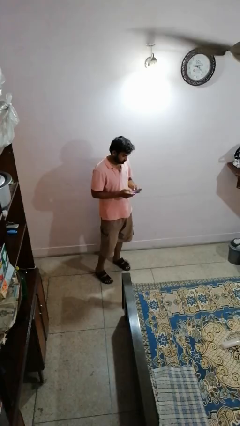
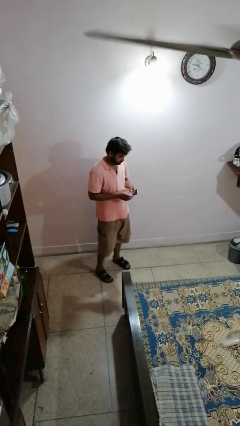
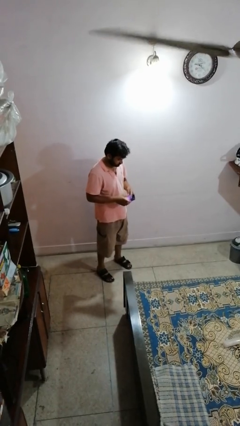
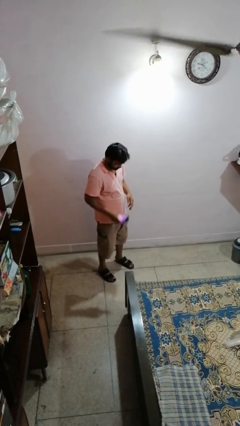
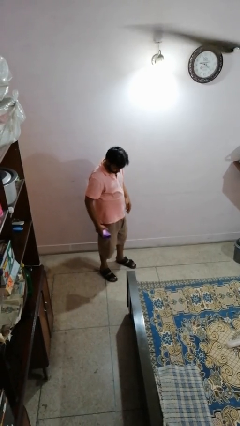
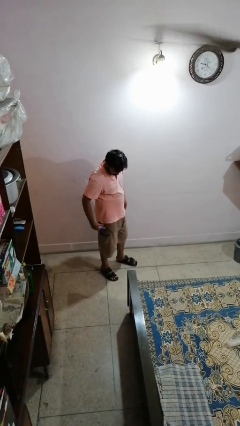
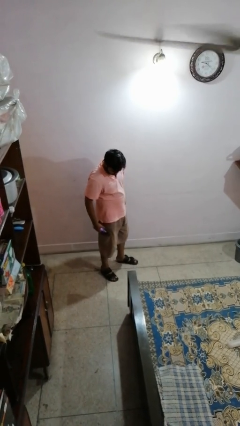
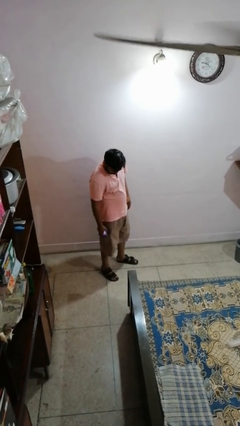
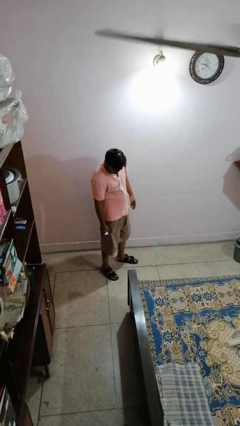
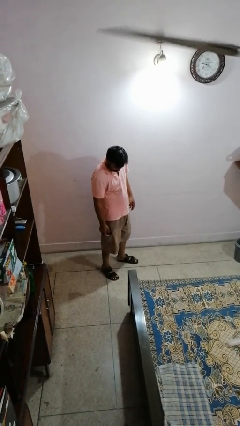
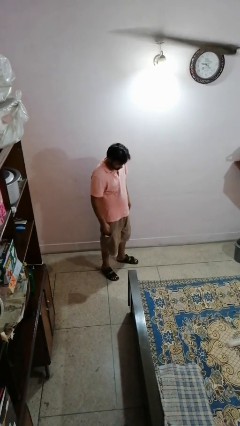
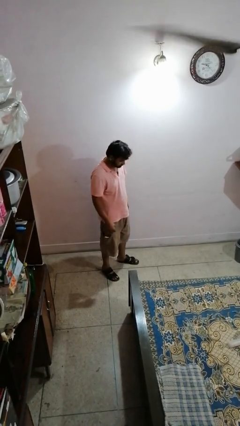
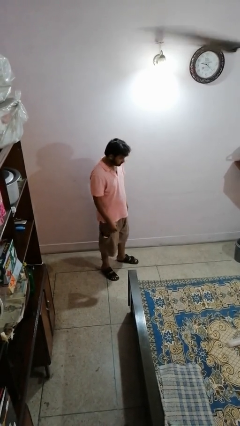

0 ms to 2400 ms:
person puts phone into pocket

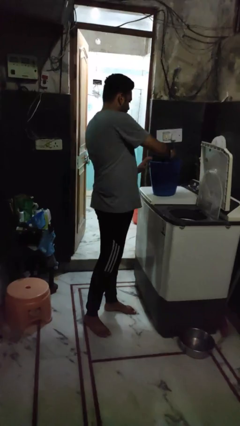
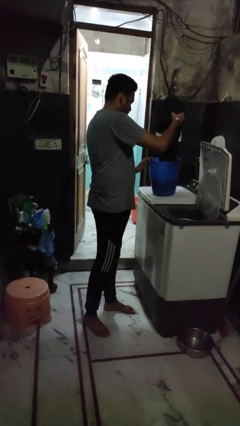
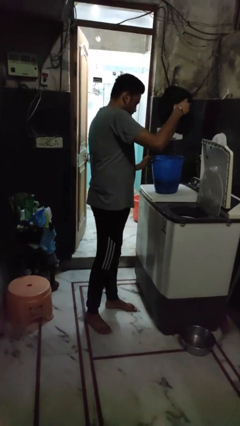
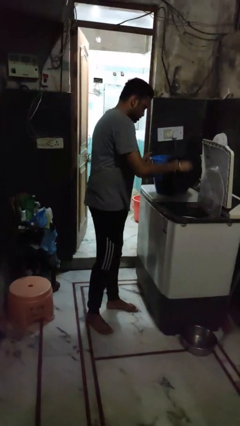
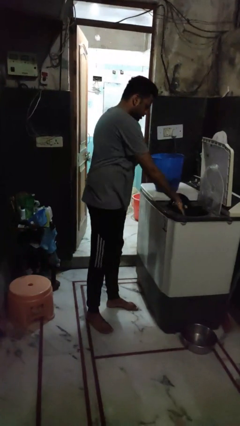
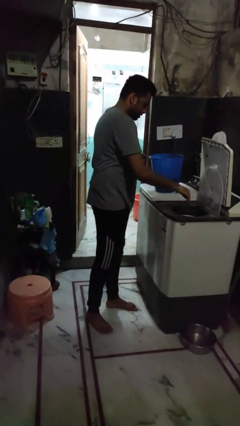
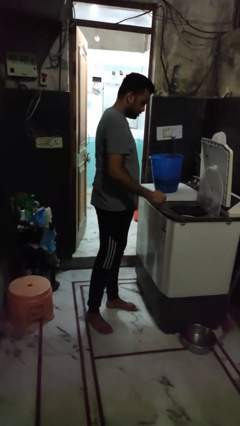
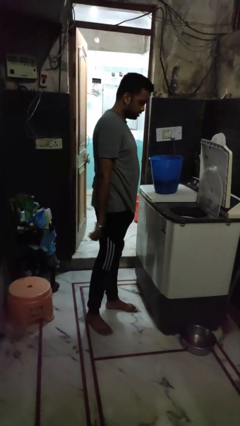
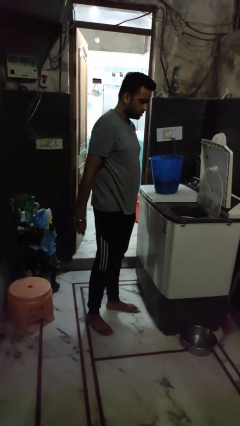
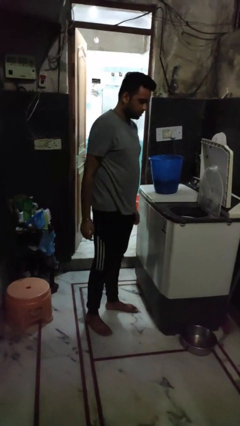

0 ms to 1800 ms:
person loads dryer

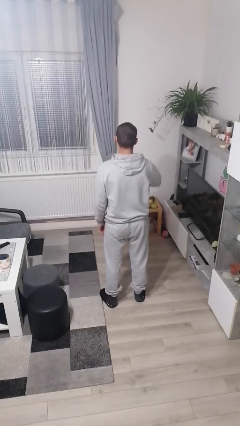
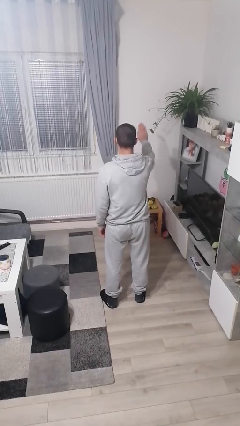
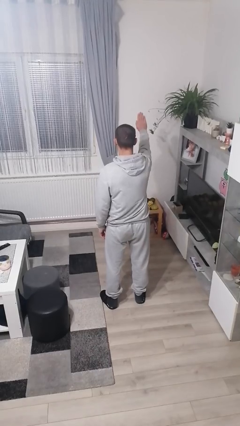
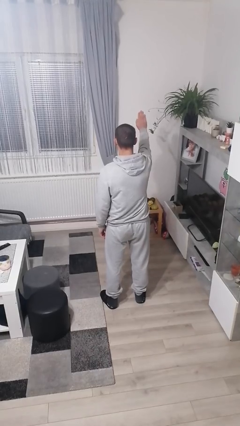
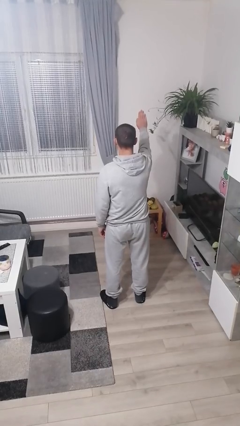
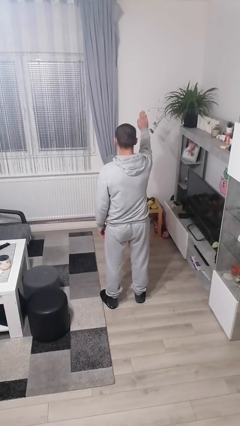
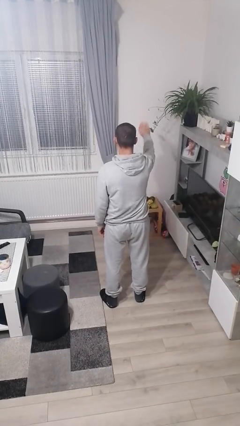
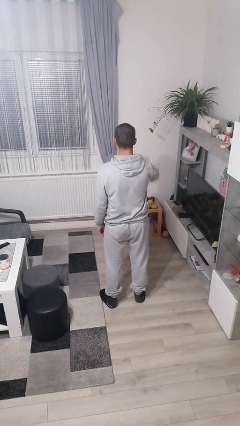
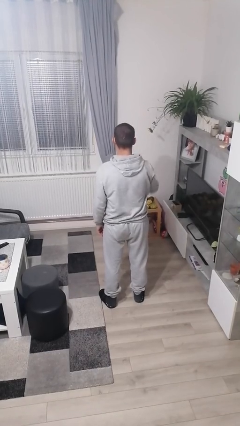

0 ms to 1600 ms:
person gestures stop

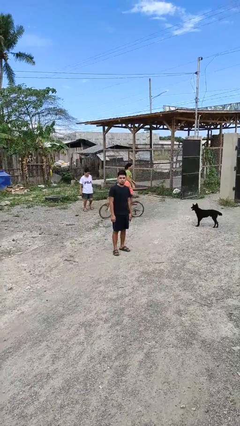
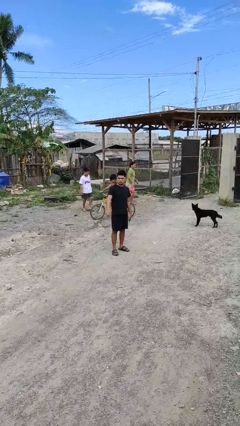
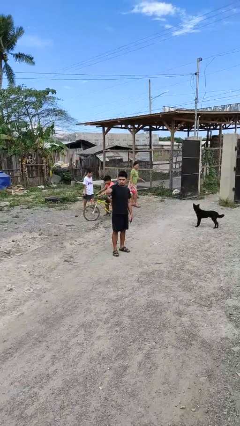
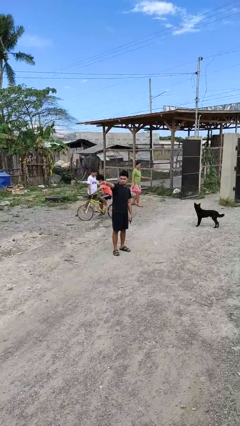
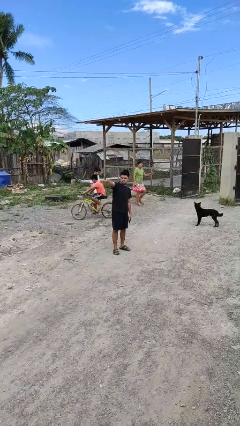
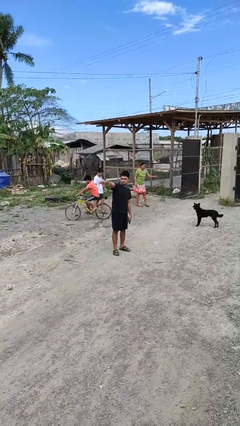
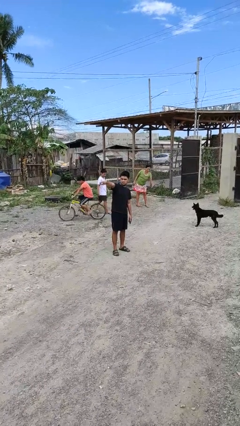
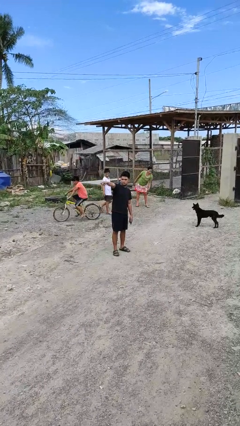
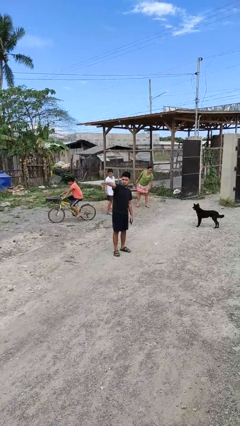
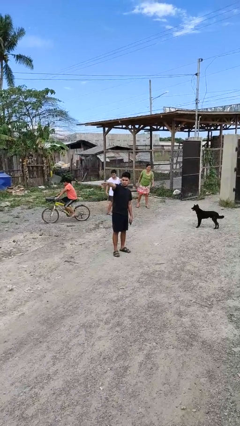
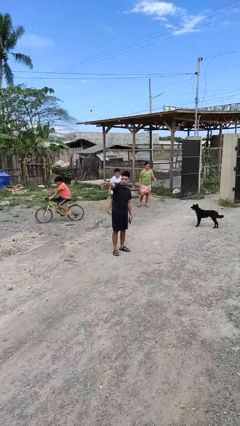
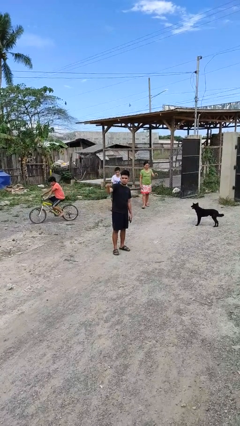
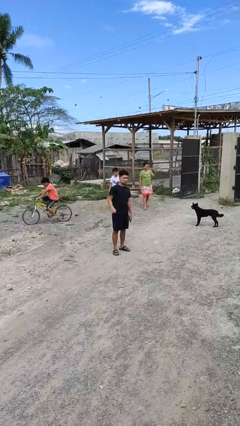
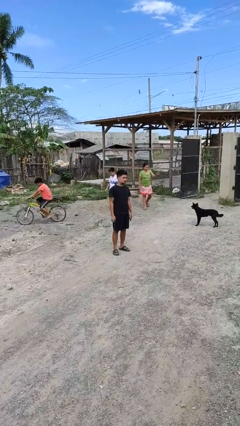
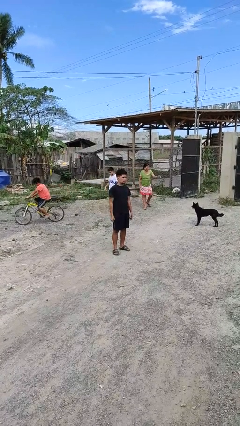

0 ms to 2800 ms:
person points at person

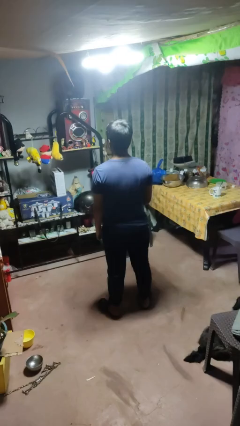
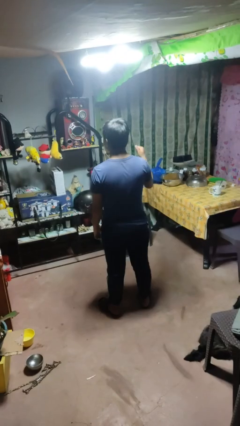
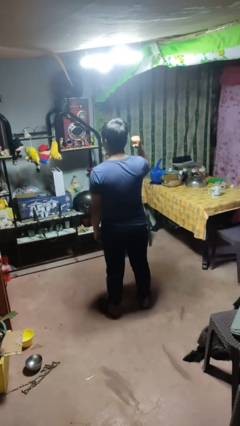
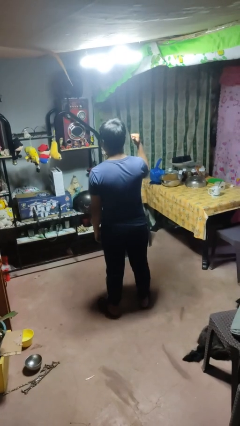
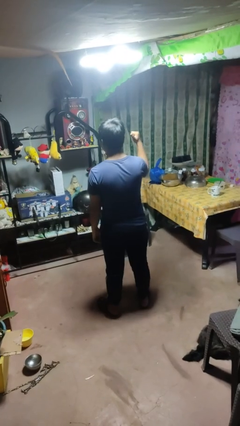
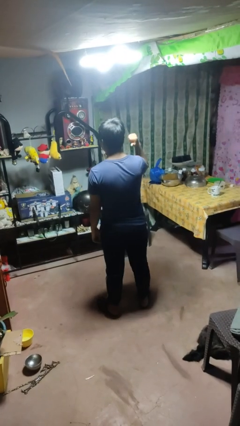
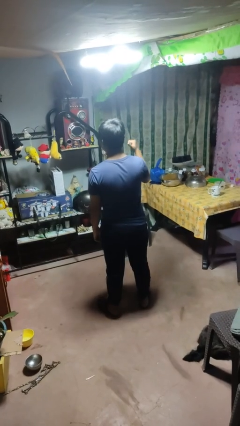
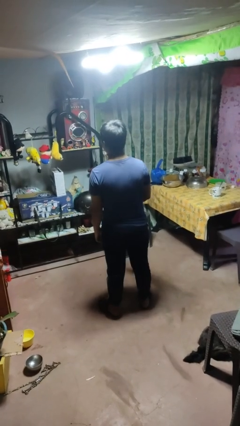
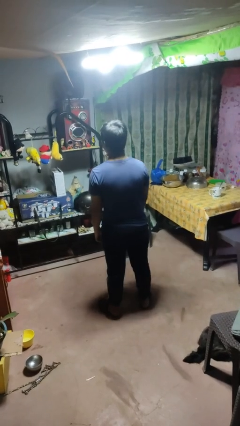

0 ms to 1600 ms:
person gestures behind me

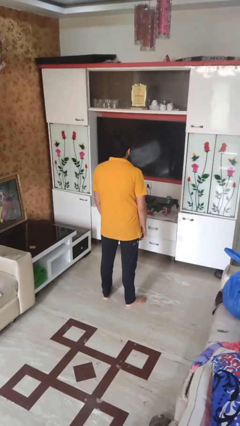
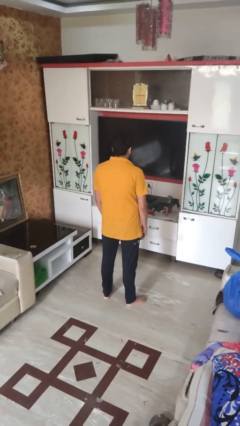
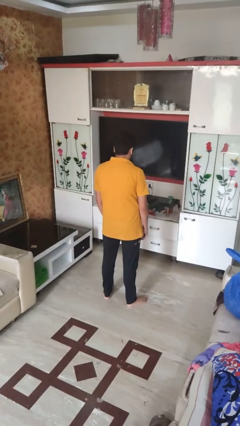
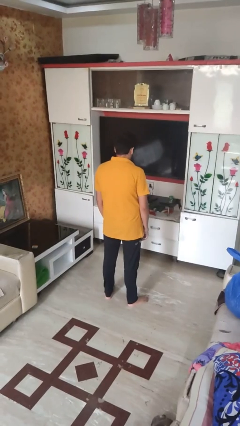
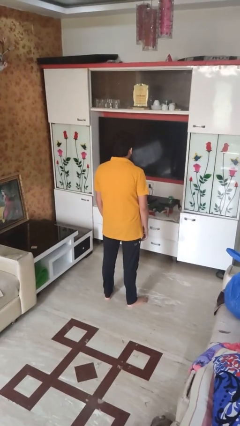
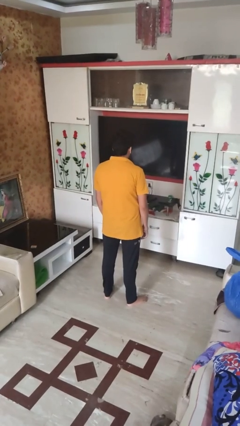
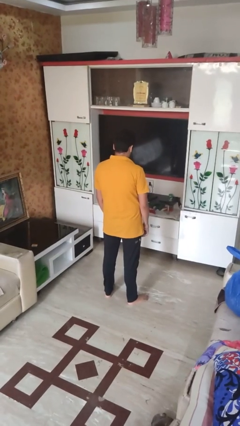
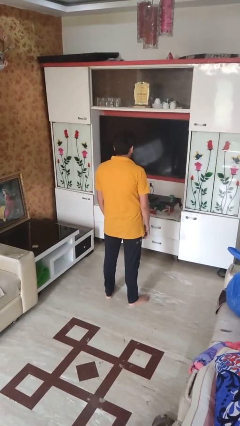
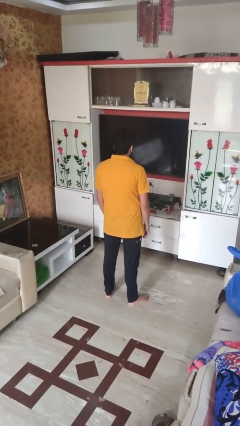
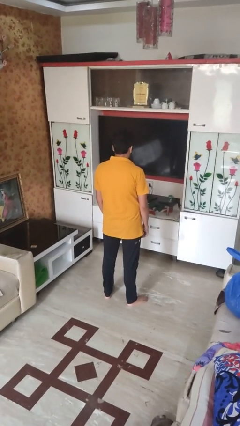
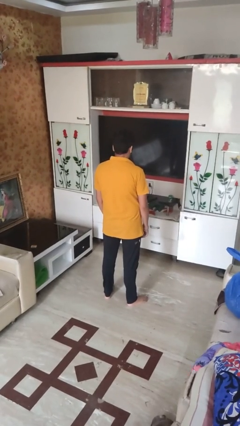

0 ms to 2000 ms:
person nods head

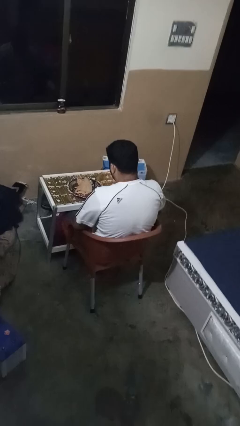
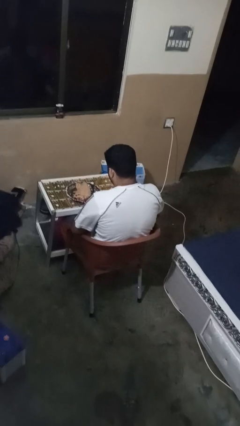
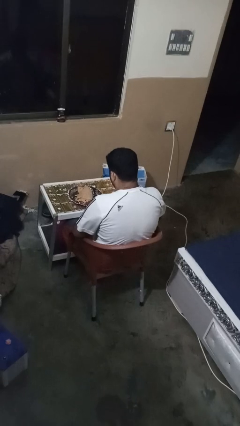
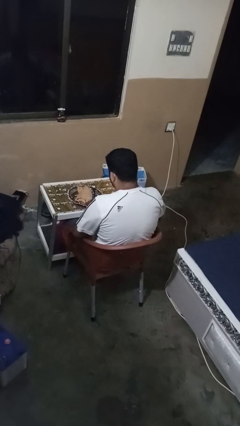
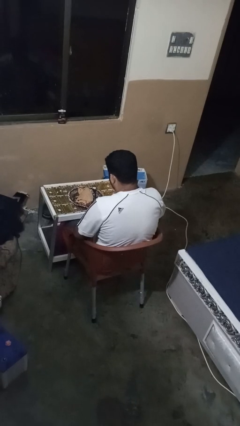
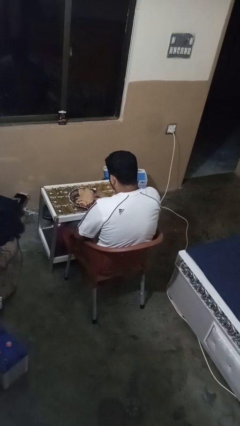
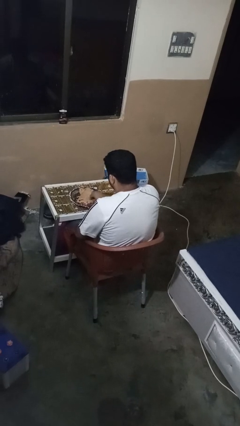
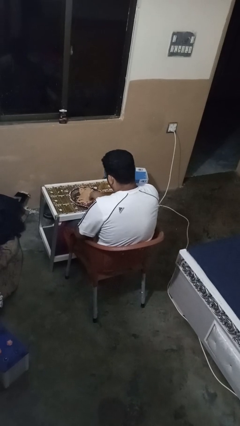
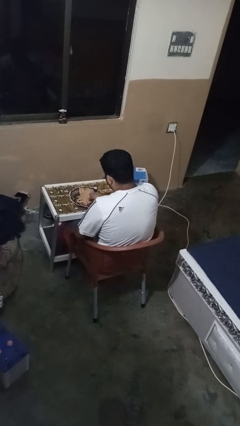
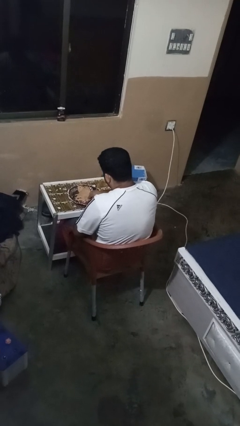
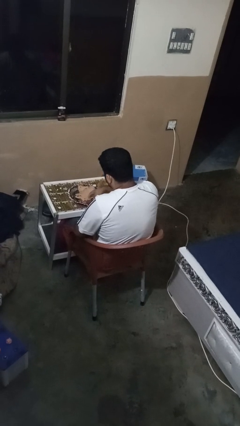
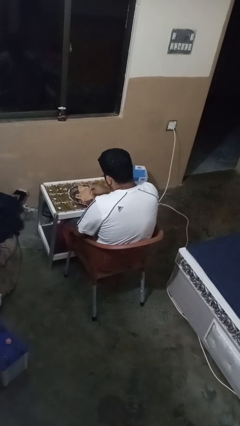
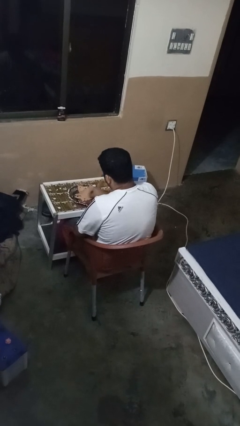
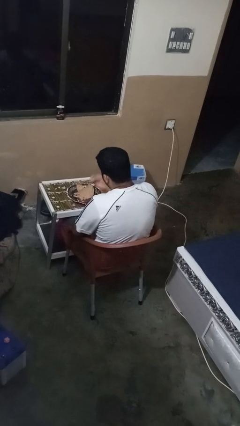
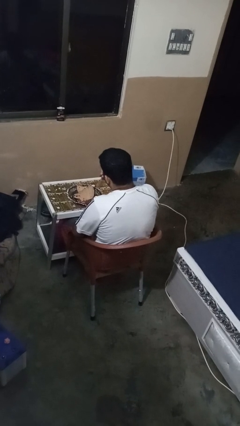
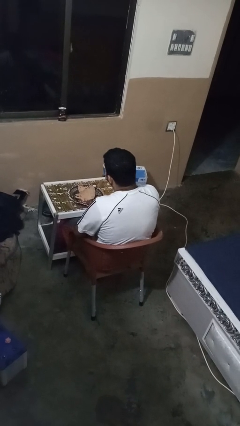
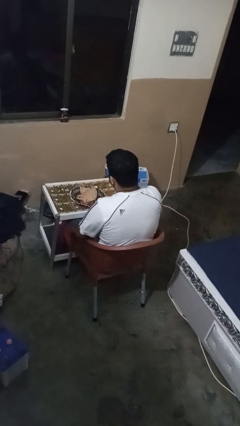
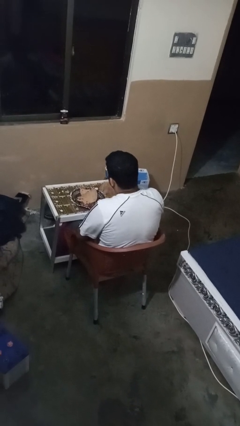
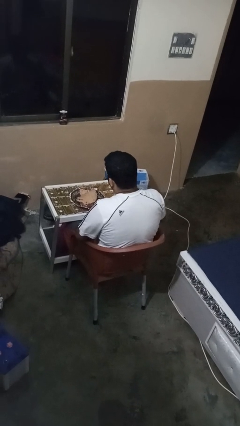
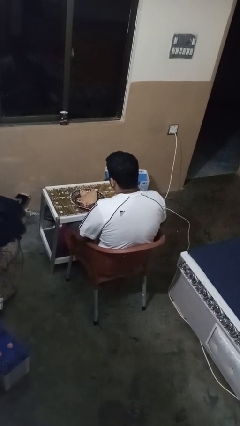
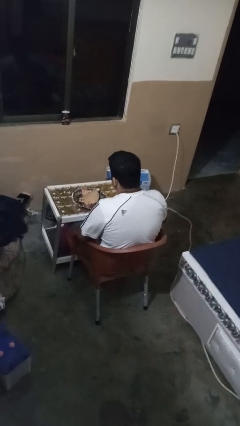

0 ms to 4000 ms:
person eats with hands

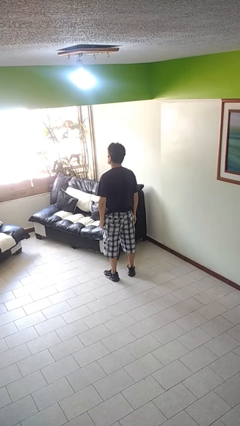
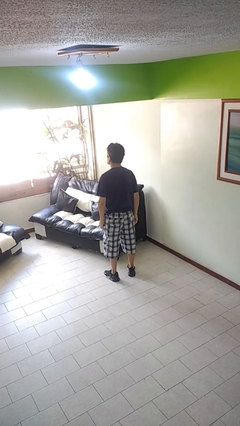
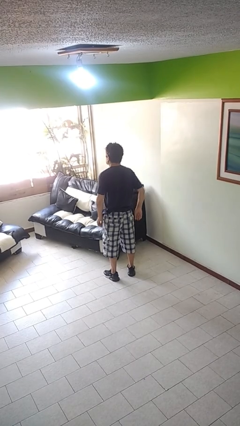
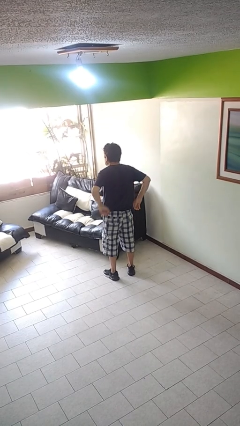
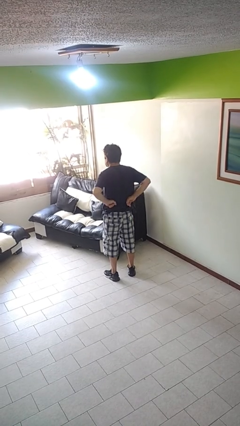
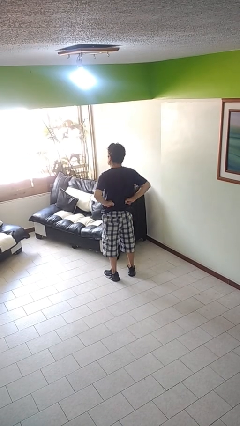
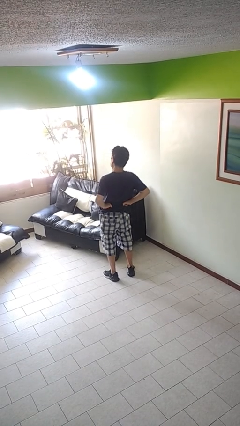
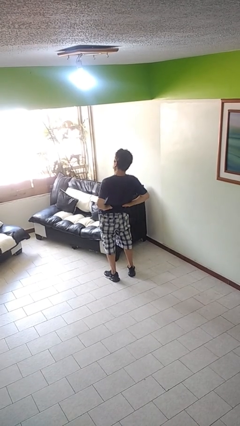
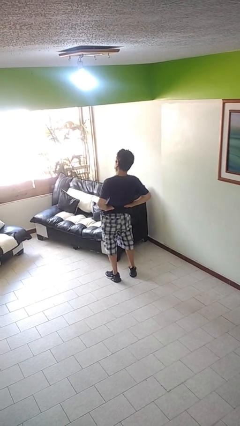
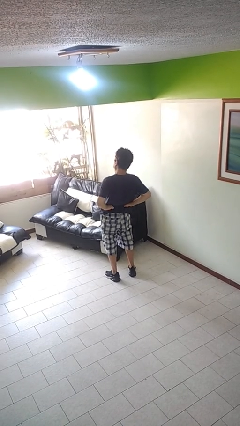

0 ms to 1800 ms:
person stretches back
